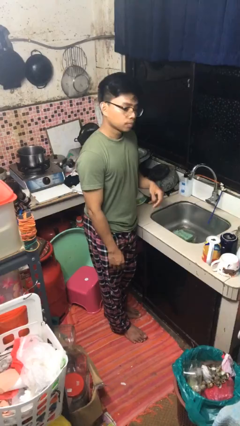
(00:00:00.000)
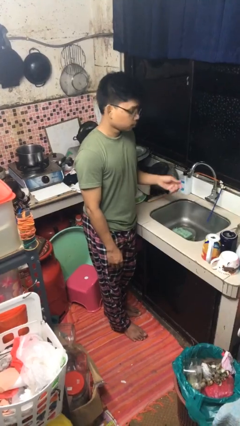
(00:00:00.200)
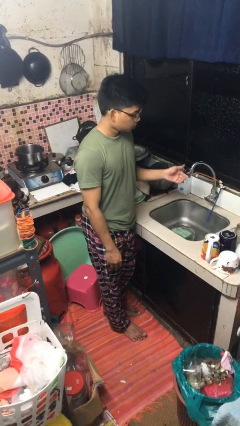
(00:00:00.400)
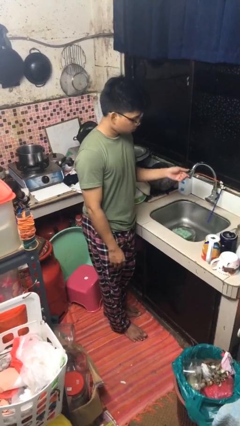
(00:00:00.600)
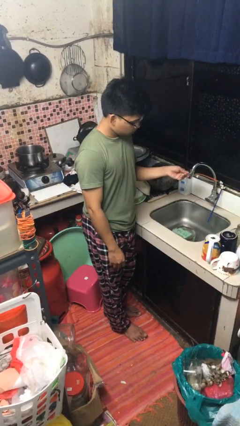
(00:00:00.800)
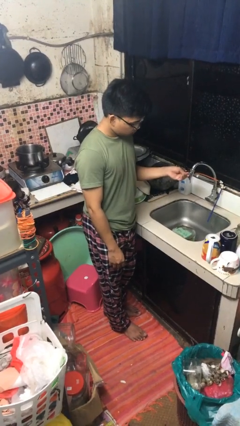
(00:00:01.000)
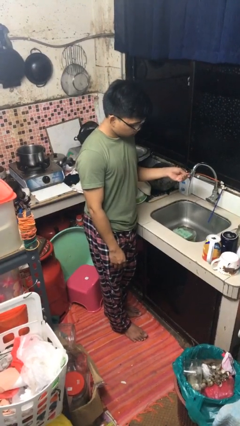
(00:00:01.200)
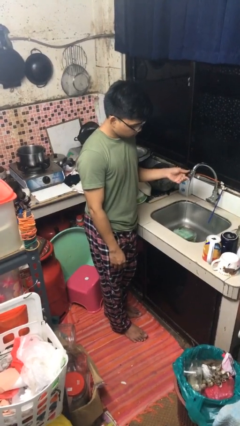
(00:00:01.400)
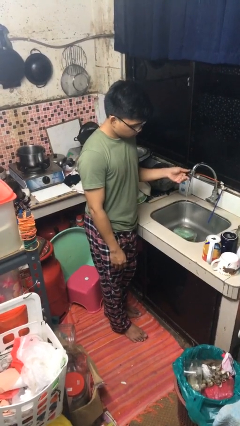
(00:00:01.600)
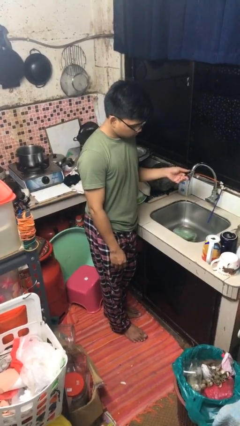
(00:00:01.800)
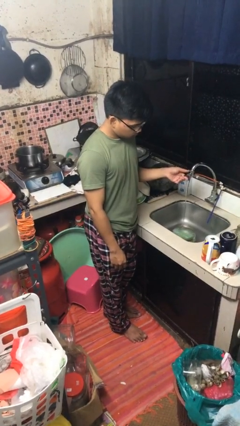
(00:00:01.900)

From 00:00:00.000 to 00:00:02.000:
person turns on faucet

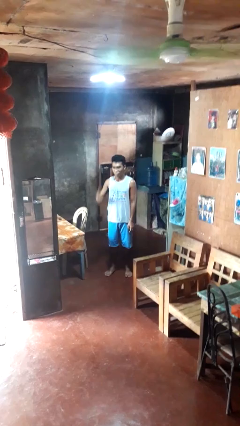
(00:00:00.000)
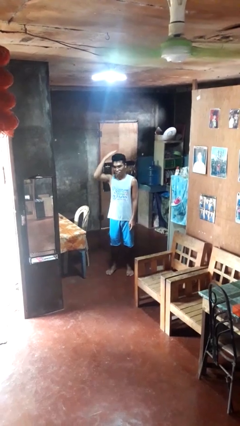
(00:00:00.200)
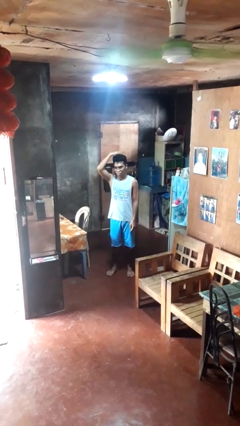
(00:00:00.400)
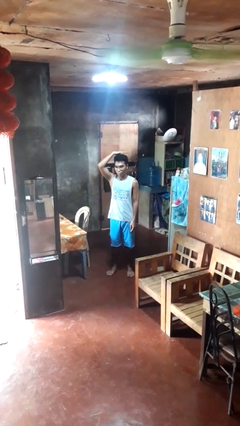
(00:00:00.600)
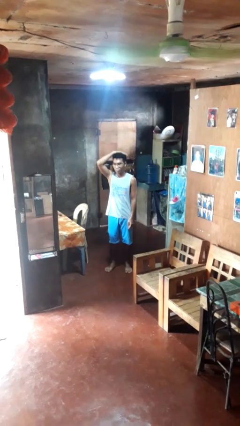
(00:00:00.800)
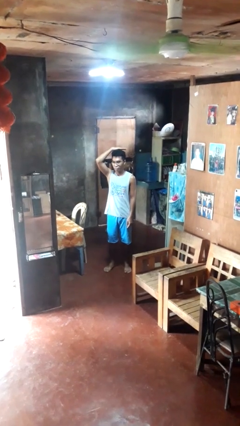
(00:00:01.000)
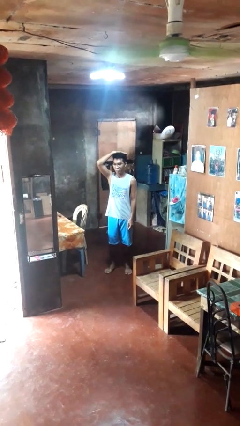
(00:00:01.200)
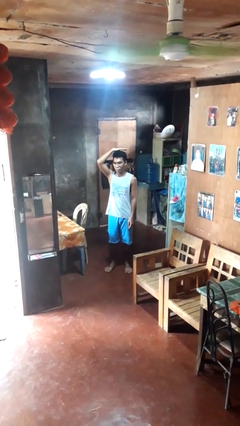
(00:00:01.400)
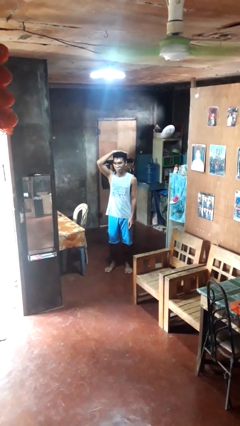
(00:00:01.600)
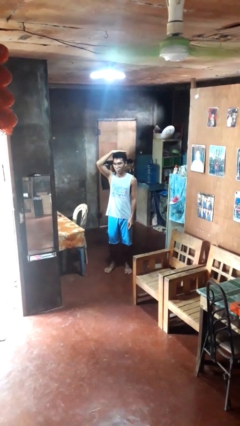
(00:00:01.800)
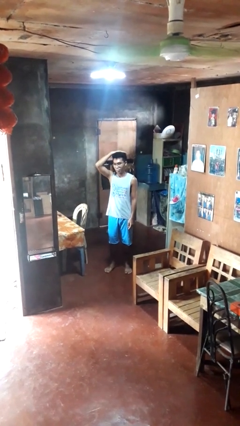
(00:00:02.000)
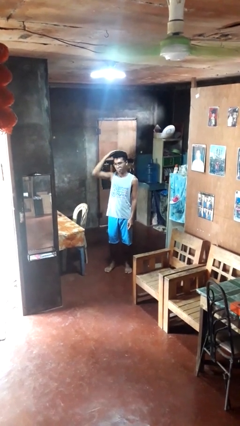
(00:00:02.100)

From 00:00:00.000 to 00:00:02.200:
person pats head

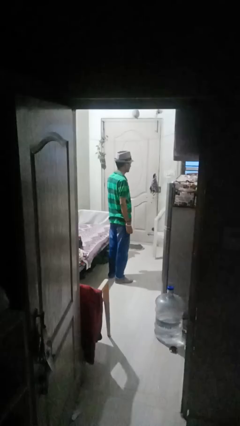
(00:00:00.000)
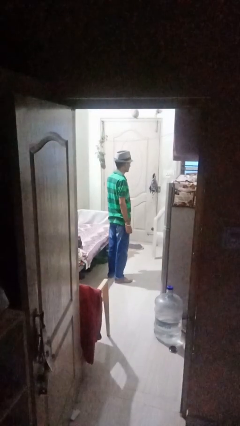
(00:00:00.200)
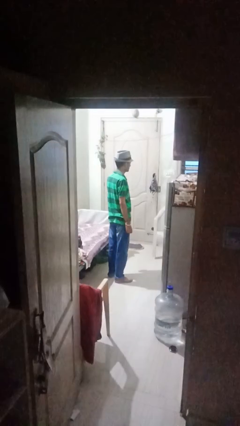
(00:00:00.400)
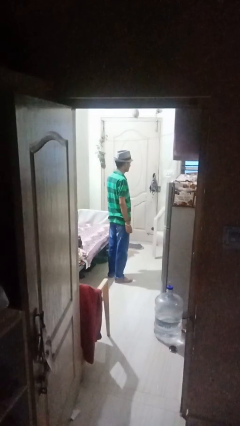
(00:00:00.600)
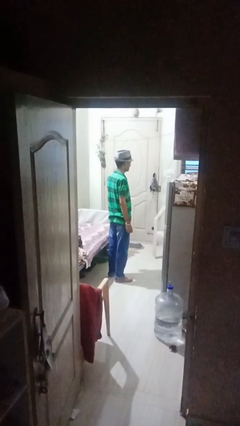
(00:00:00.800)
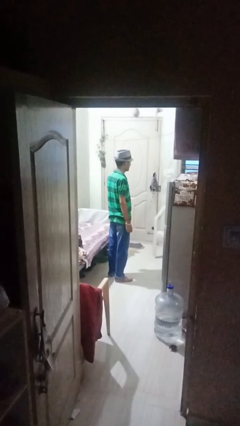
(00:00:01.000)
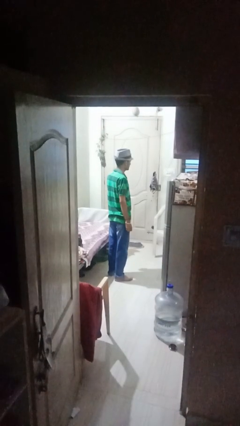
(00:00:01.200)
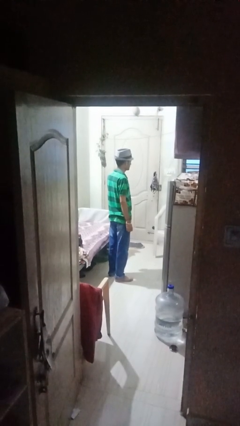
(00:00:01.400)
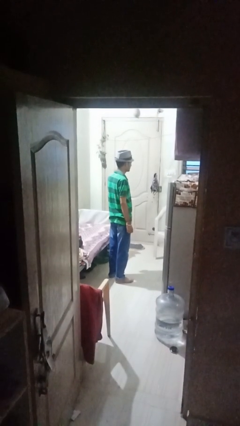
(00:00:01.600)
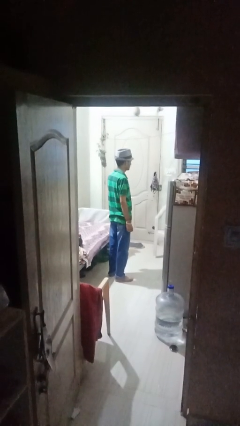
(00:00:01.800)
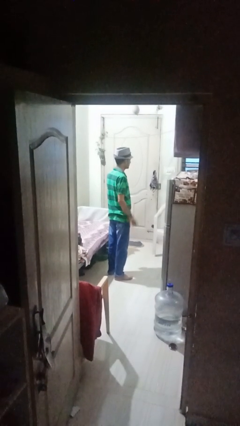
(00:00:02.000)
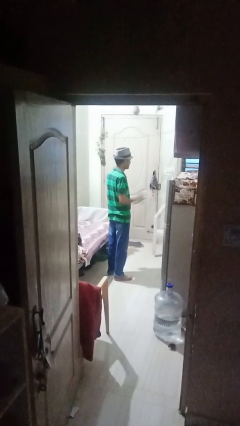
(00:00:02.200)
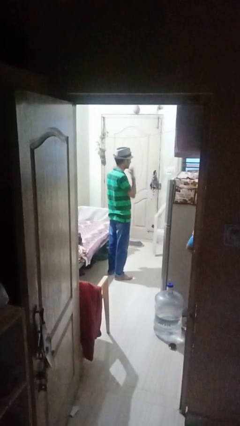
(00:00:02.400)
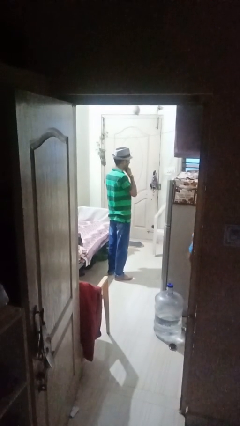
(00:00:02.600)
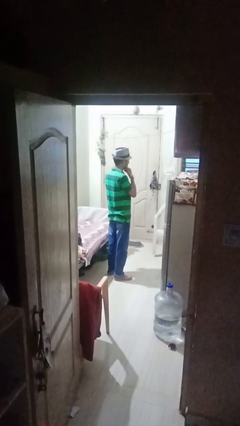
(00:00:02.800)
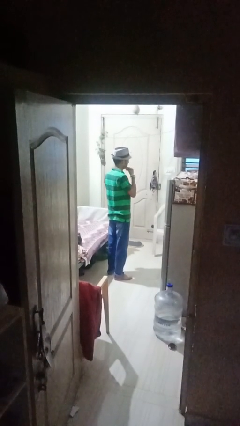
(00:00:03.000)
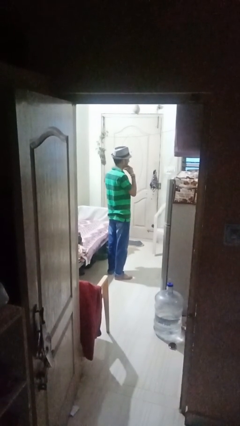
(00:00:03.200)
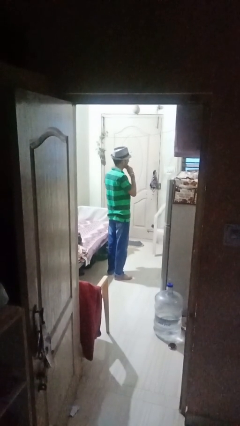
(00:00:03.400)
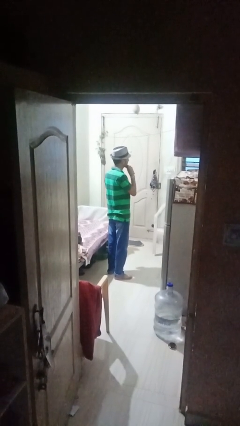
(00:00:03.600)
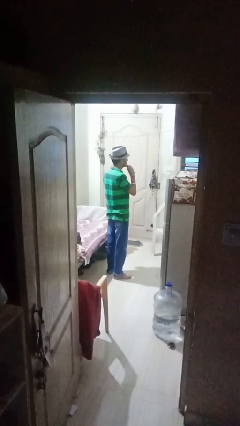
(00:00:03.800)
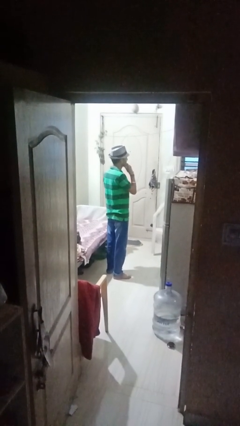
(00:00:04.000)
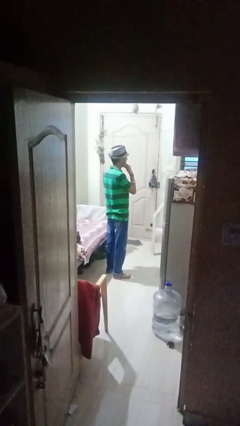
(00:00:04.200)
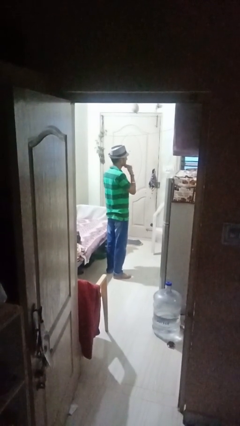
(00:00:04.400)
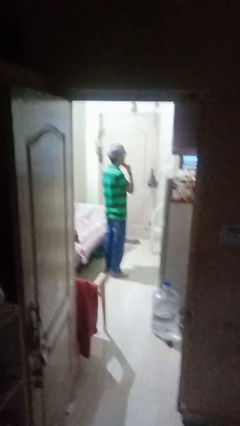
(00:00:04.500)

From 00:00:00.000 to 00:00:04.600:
person strokes chin

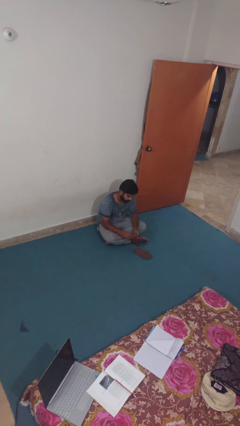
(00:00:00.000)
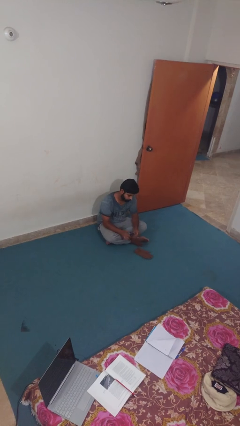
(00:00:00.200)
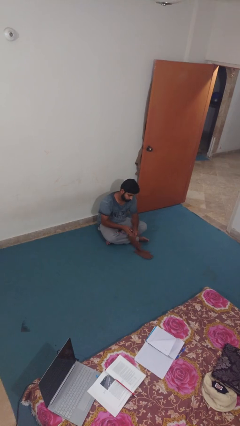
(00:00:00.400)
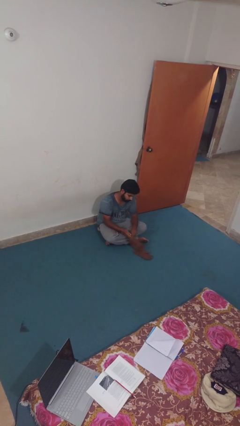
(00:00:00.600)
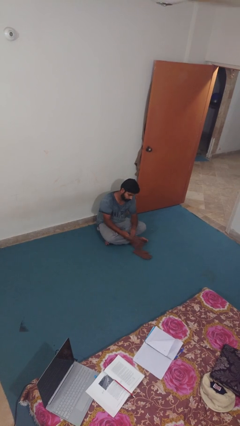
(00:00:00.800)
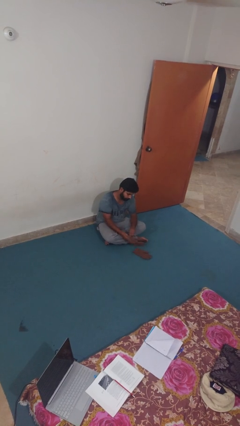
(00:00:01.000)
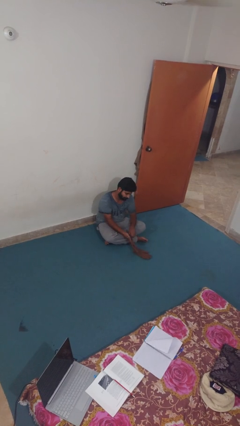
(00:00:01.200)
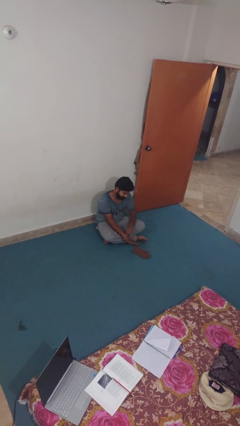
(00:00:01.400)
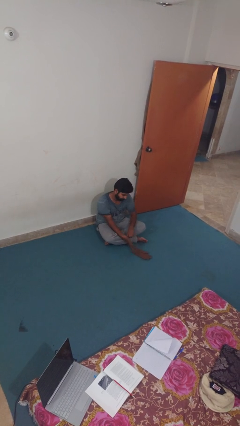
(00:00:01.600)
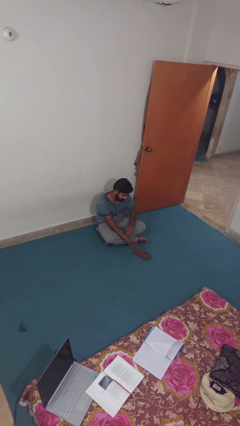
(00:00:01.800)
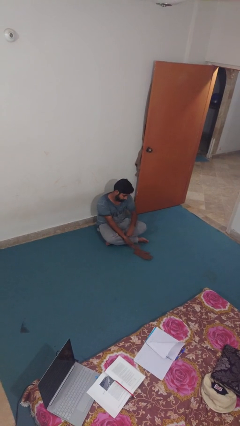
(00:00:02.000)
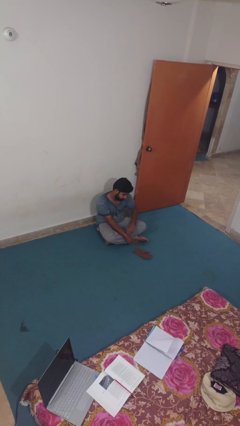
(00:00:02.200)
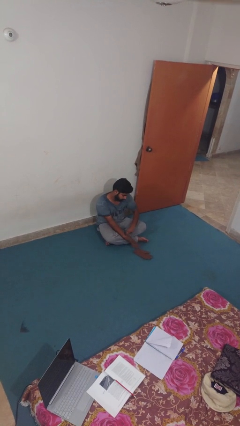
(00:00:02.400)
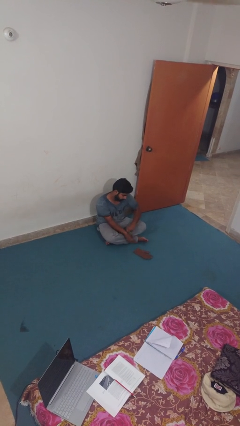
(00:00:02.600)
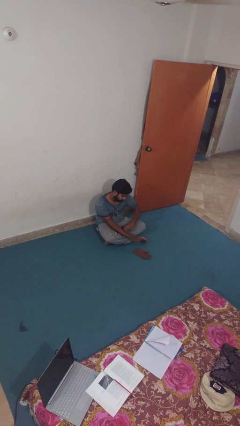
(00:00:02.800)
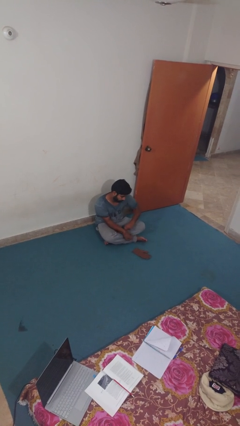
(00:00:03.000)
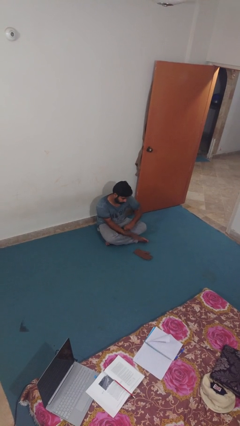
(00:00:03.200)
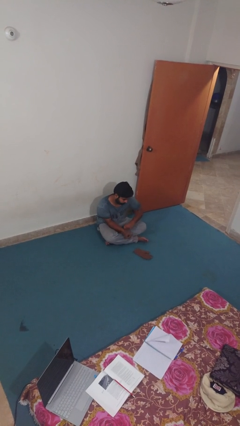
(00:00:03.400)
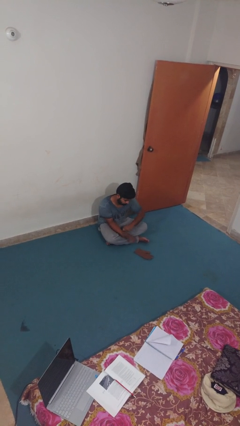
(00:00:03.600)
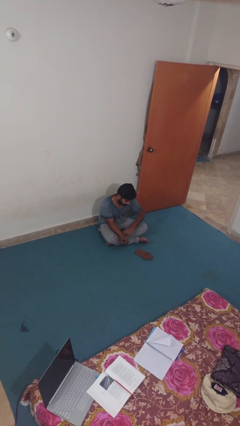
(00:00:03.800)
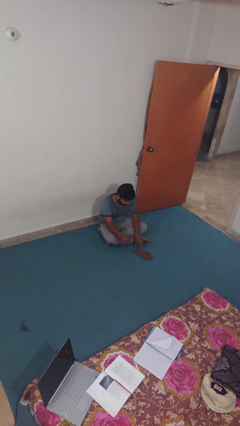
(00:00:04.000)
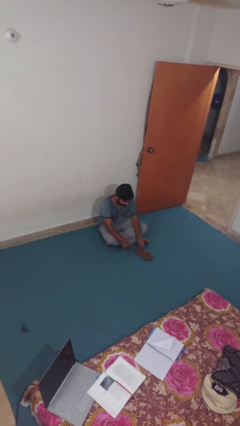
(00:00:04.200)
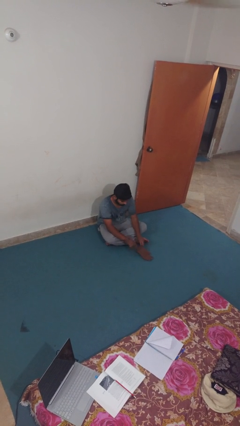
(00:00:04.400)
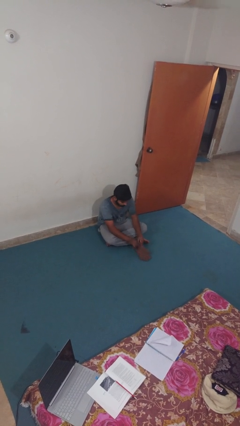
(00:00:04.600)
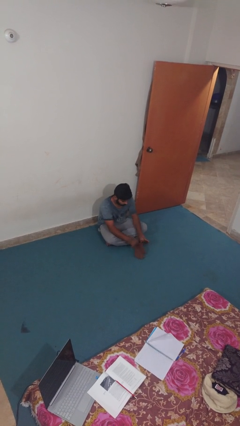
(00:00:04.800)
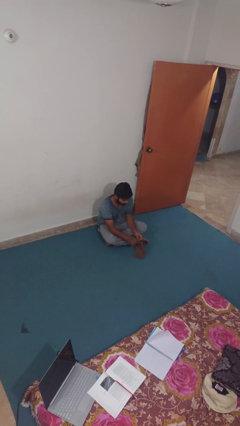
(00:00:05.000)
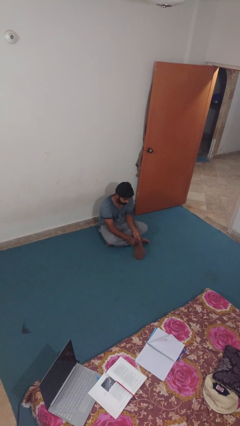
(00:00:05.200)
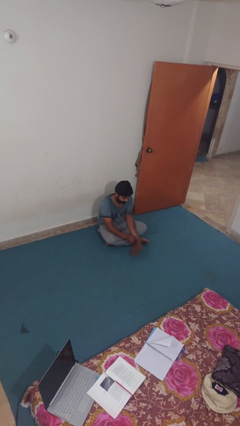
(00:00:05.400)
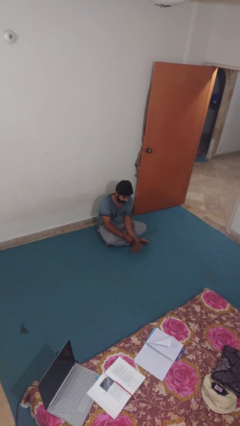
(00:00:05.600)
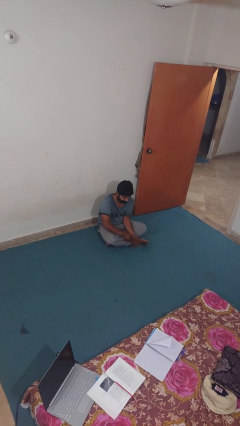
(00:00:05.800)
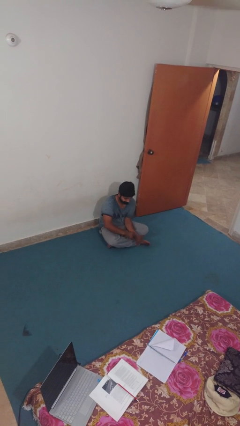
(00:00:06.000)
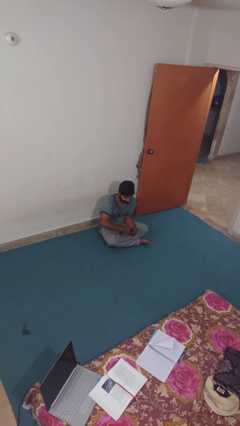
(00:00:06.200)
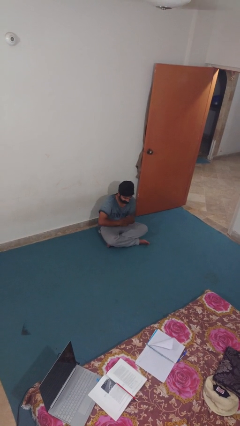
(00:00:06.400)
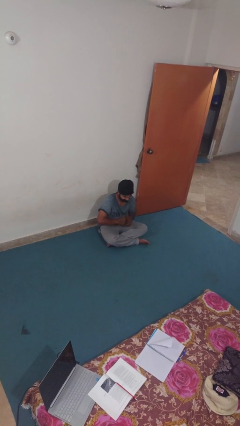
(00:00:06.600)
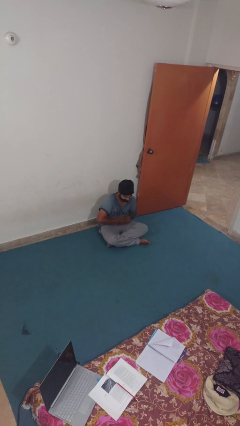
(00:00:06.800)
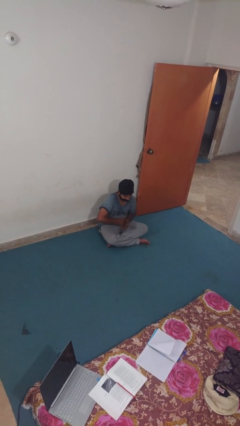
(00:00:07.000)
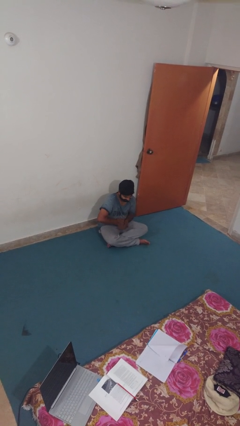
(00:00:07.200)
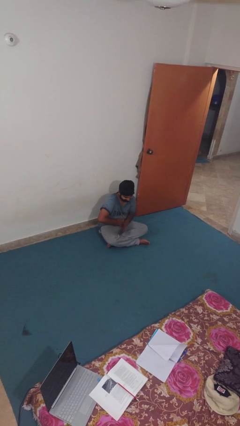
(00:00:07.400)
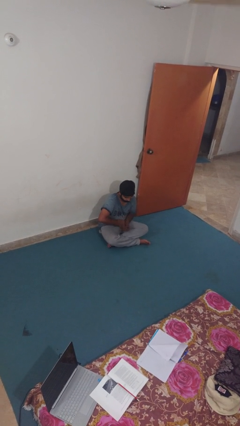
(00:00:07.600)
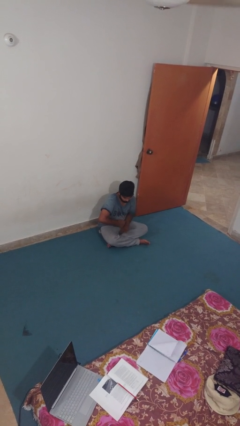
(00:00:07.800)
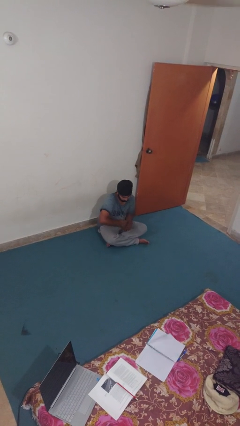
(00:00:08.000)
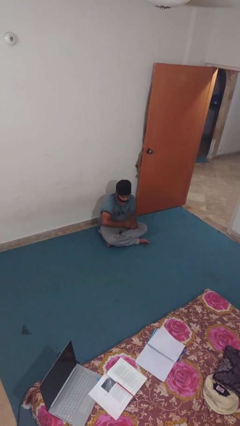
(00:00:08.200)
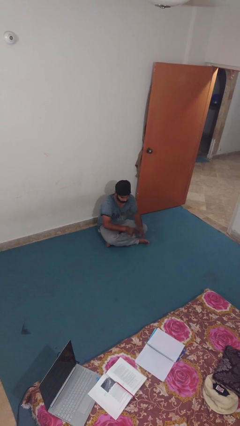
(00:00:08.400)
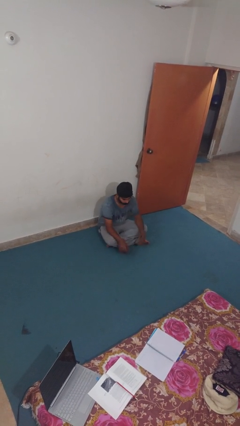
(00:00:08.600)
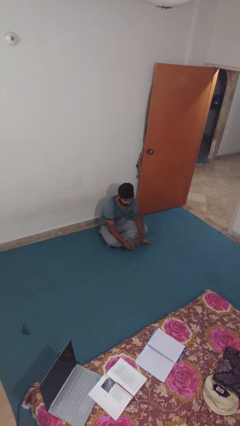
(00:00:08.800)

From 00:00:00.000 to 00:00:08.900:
person puts on gloves

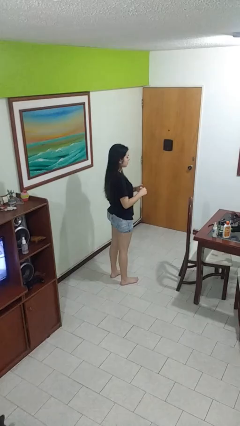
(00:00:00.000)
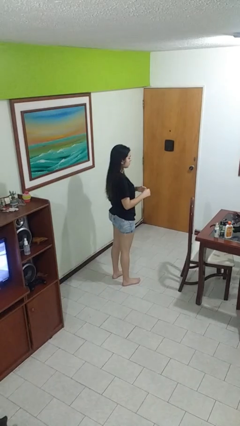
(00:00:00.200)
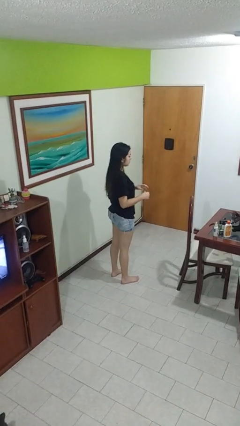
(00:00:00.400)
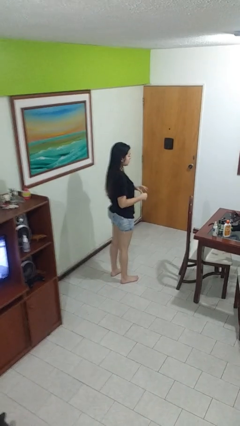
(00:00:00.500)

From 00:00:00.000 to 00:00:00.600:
person takes off ring
